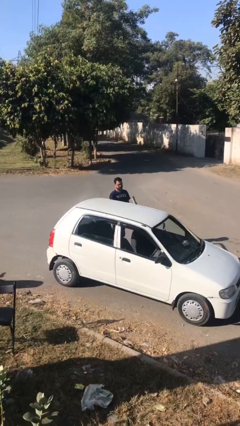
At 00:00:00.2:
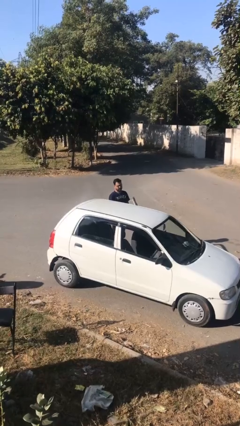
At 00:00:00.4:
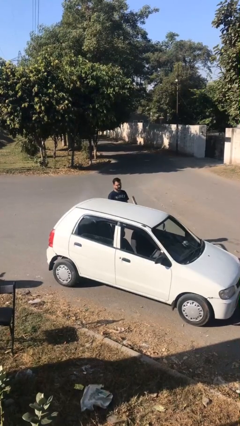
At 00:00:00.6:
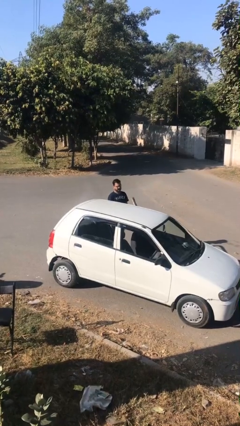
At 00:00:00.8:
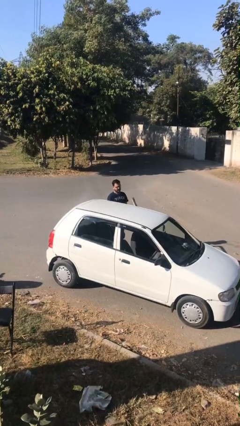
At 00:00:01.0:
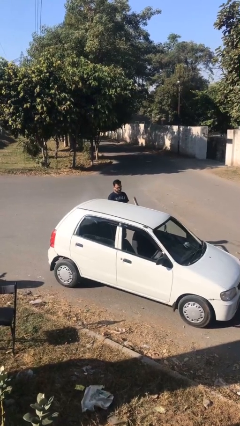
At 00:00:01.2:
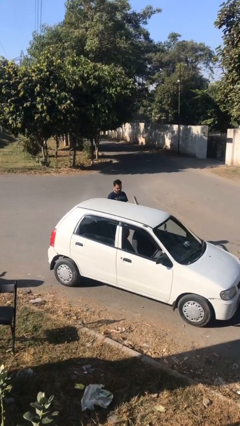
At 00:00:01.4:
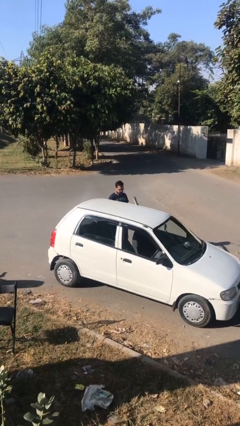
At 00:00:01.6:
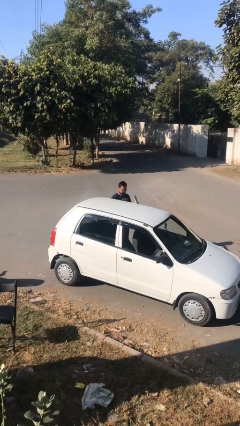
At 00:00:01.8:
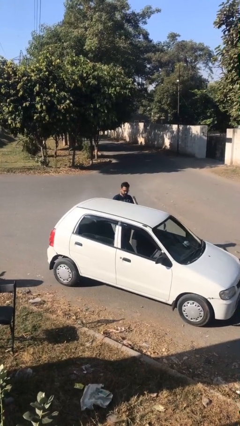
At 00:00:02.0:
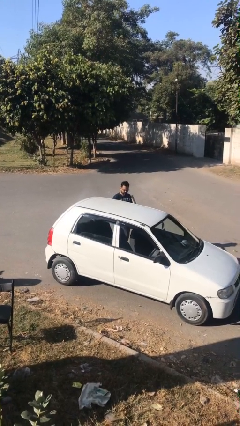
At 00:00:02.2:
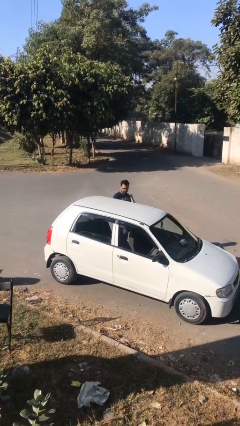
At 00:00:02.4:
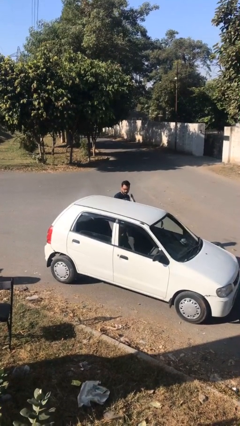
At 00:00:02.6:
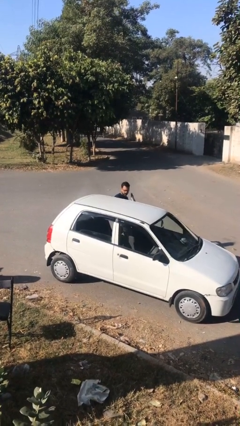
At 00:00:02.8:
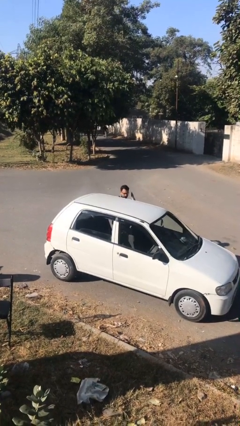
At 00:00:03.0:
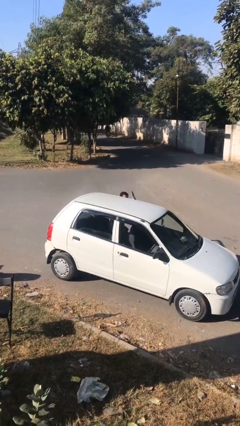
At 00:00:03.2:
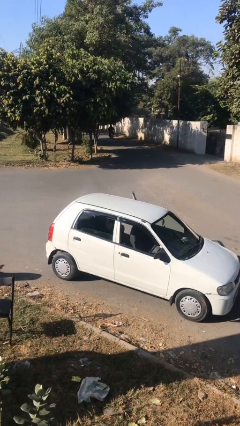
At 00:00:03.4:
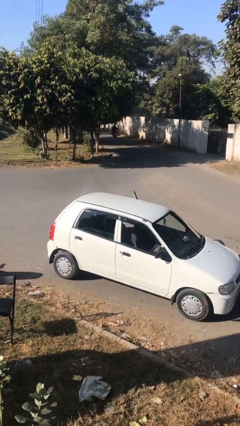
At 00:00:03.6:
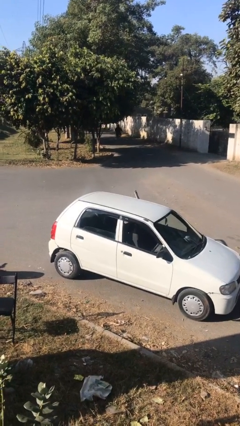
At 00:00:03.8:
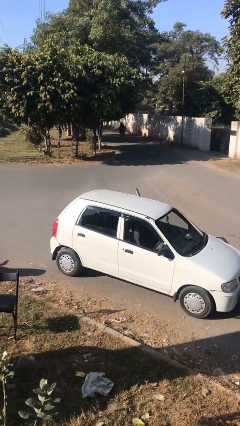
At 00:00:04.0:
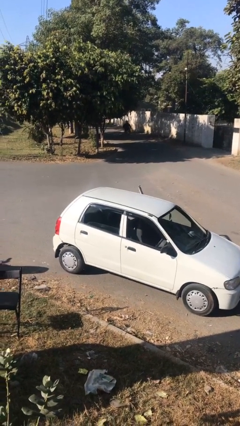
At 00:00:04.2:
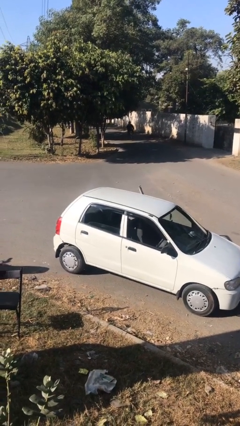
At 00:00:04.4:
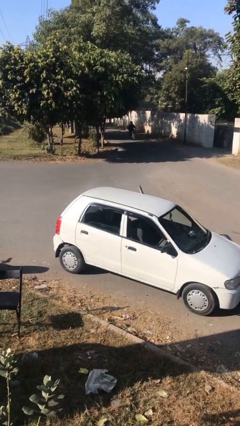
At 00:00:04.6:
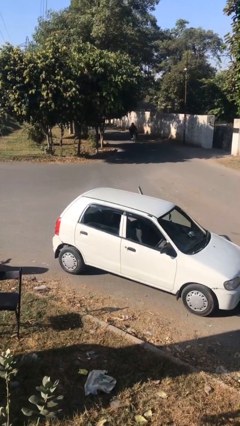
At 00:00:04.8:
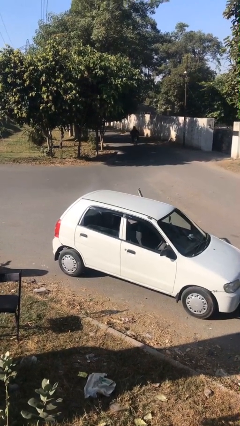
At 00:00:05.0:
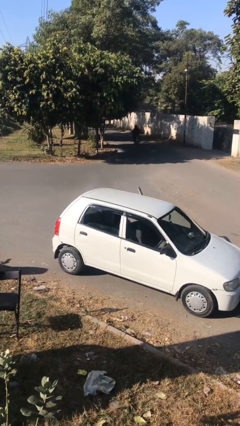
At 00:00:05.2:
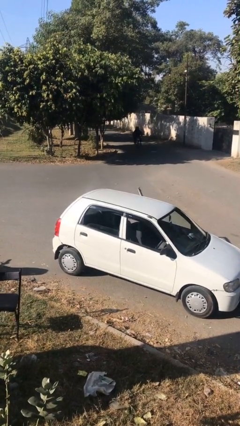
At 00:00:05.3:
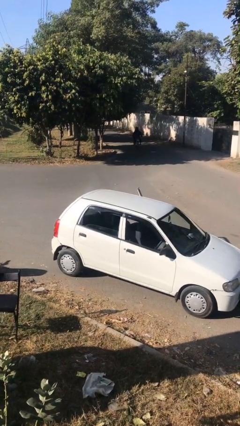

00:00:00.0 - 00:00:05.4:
person enters car

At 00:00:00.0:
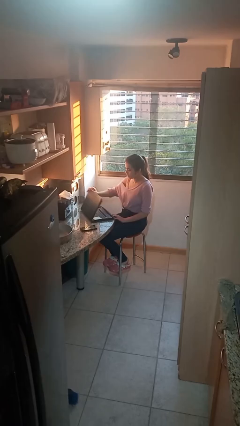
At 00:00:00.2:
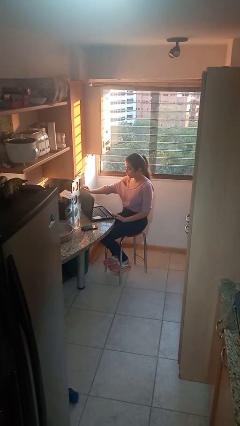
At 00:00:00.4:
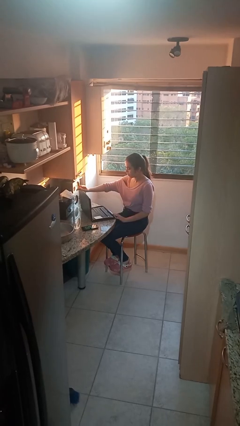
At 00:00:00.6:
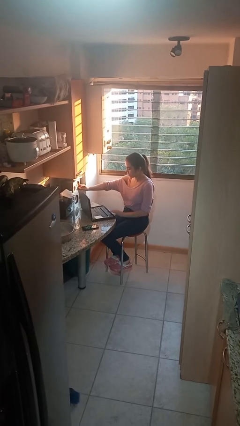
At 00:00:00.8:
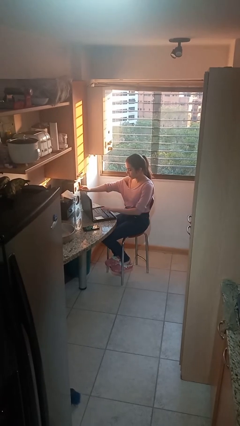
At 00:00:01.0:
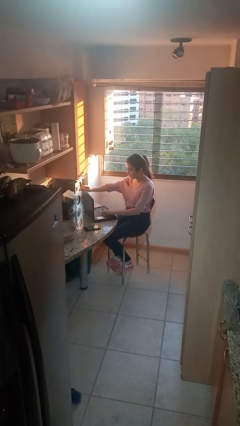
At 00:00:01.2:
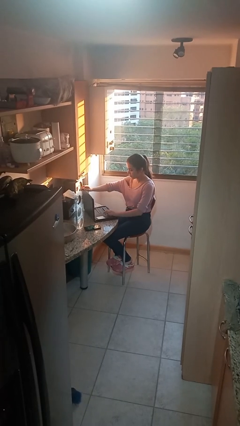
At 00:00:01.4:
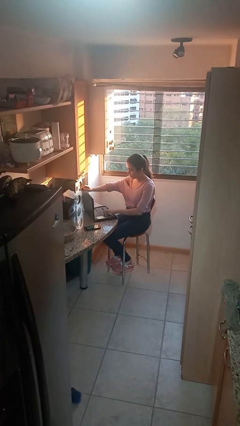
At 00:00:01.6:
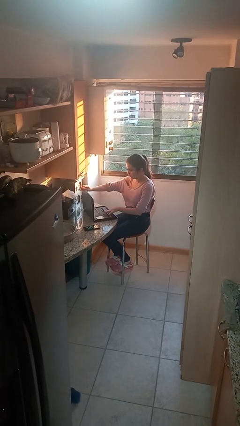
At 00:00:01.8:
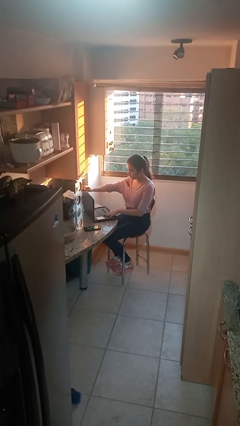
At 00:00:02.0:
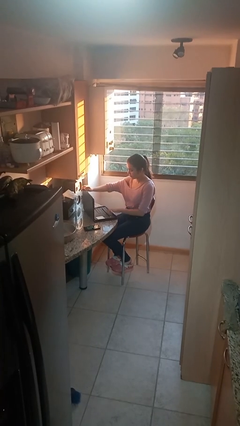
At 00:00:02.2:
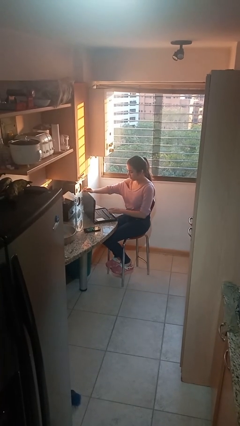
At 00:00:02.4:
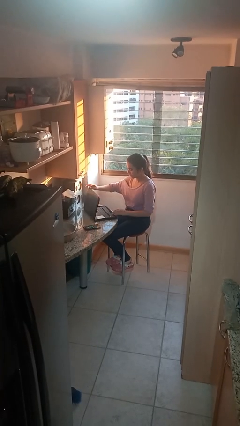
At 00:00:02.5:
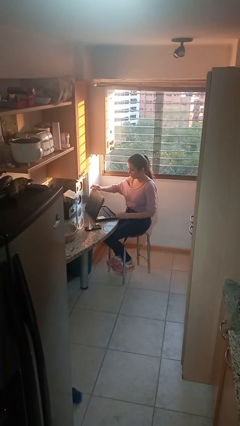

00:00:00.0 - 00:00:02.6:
person interacts with laptop

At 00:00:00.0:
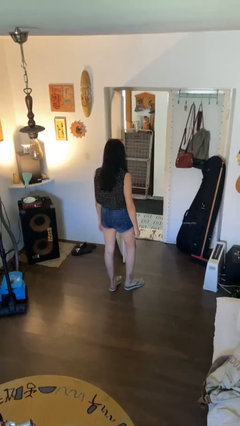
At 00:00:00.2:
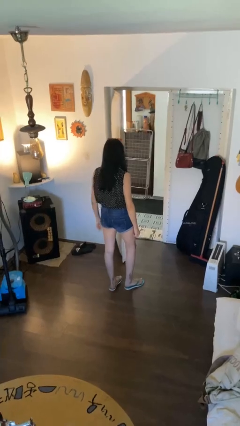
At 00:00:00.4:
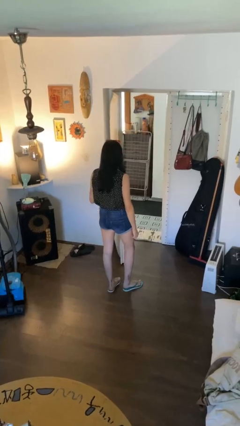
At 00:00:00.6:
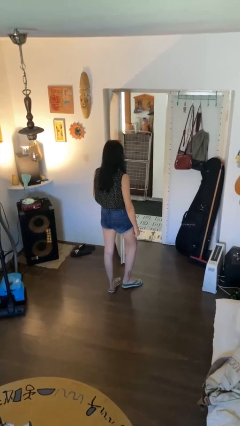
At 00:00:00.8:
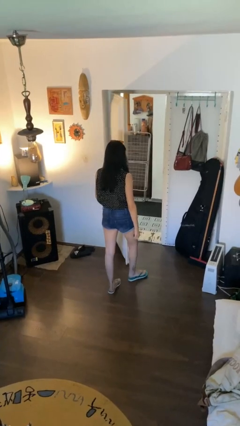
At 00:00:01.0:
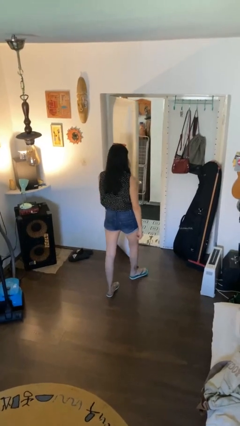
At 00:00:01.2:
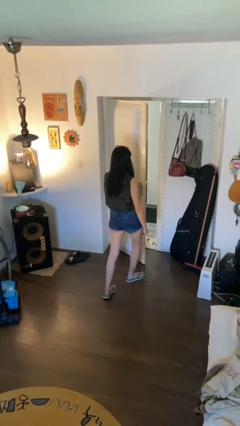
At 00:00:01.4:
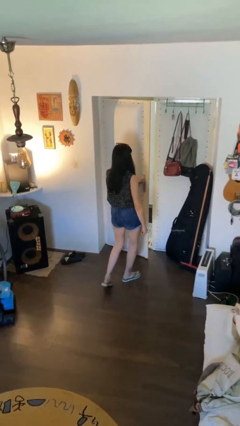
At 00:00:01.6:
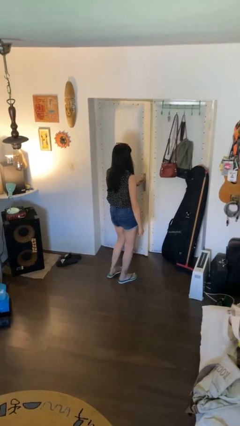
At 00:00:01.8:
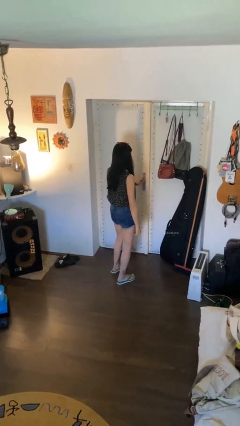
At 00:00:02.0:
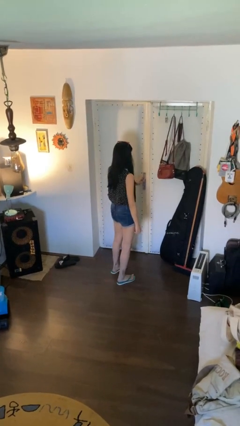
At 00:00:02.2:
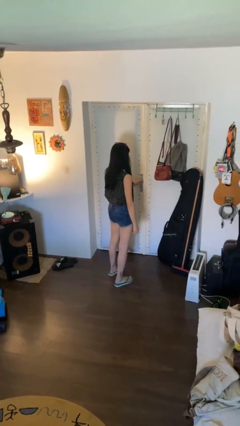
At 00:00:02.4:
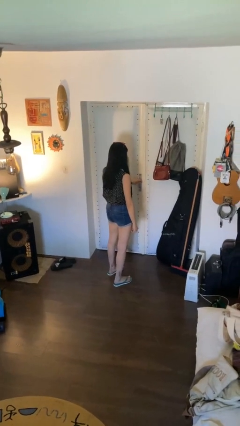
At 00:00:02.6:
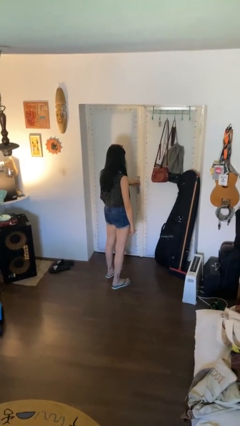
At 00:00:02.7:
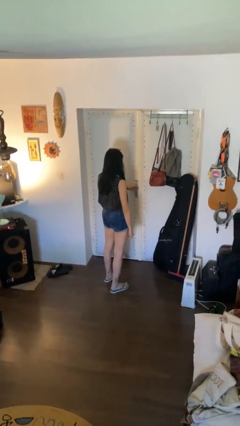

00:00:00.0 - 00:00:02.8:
person closes facility door

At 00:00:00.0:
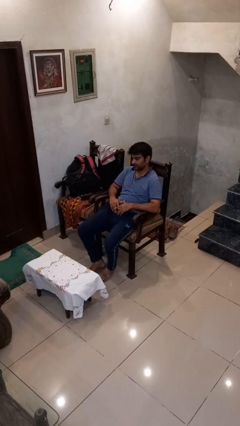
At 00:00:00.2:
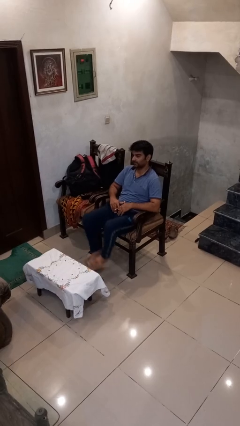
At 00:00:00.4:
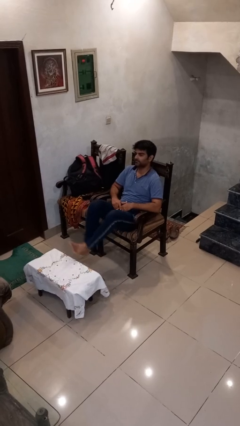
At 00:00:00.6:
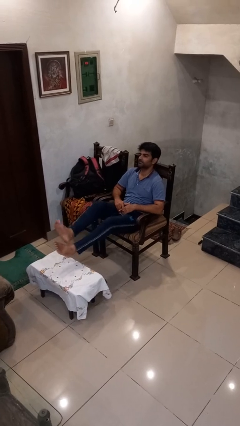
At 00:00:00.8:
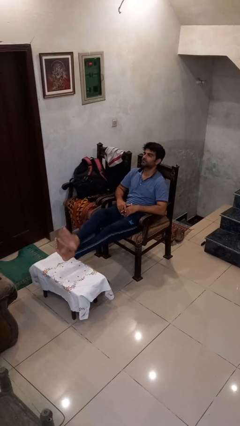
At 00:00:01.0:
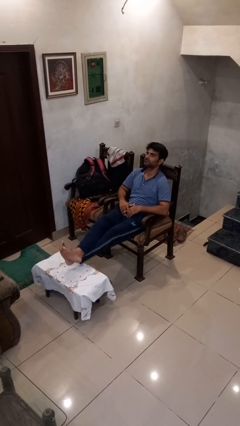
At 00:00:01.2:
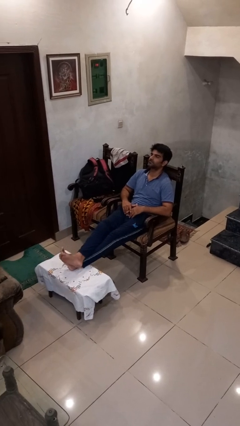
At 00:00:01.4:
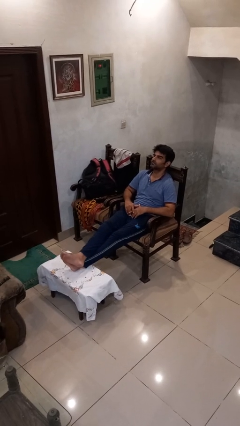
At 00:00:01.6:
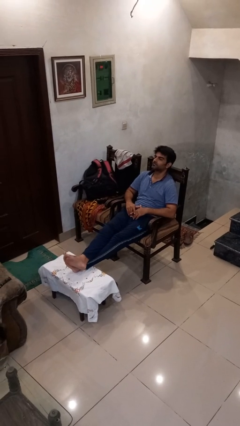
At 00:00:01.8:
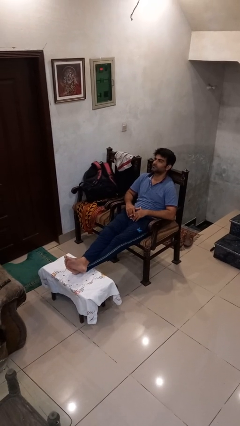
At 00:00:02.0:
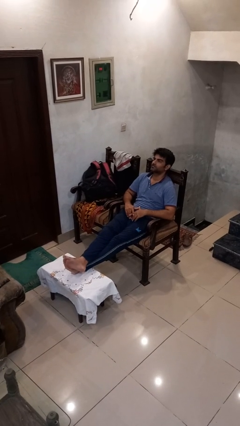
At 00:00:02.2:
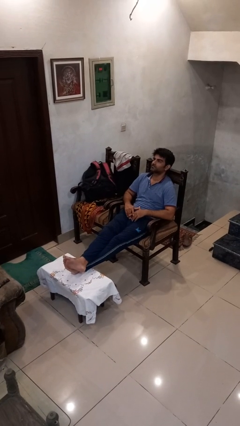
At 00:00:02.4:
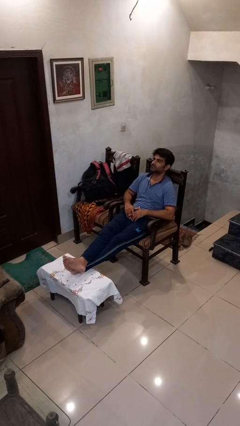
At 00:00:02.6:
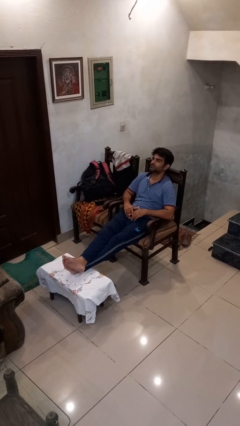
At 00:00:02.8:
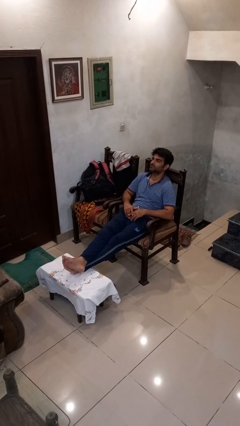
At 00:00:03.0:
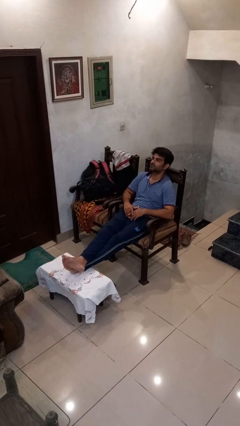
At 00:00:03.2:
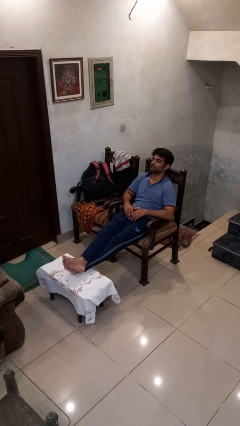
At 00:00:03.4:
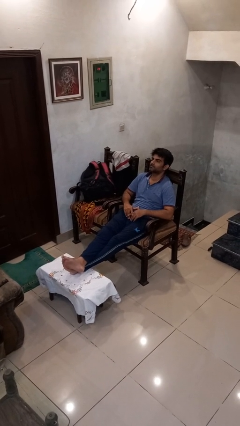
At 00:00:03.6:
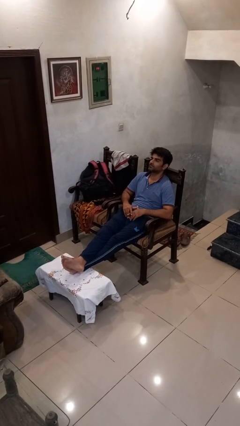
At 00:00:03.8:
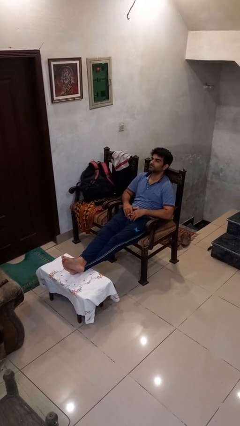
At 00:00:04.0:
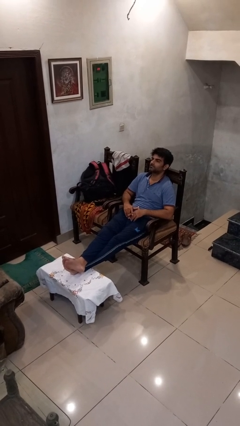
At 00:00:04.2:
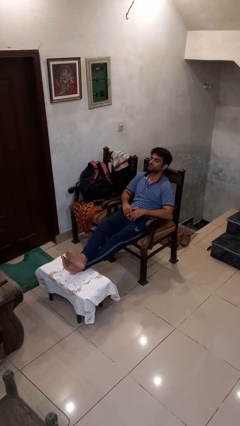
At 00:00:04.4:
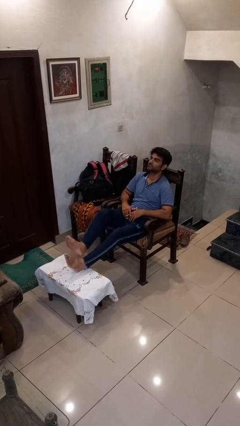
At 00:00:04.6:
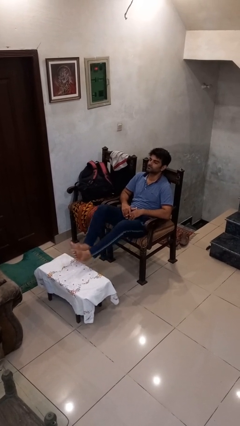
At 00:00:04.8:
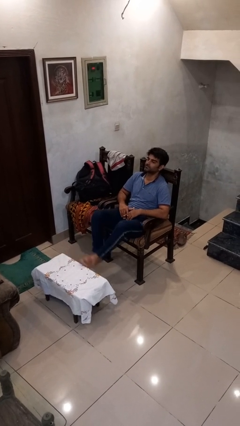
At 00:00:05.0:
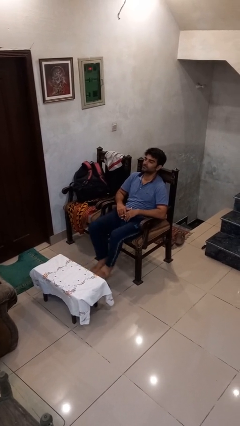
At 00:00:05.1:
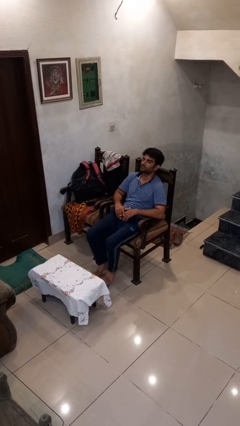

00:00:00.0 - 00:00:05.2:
person puts feet up

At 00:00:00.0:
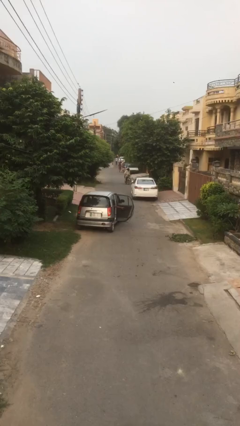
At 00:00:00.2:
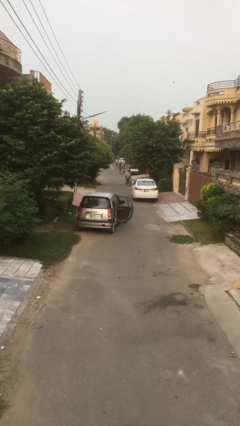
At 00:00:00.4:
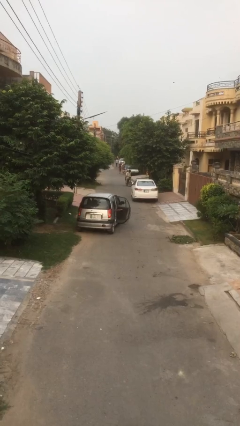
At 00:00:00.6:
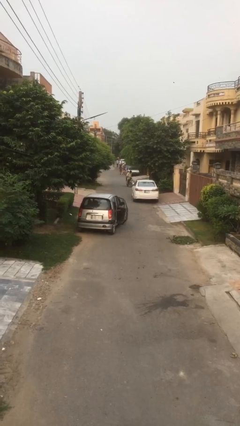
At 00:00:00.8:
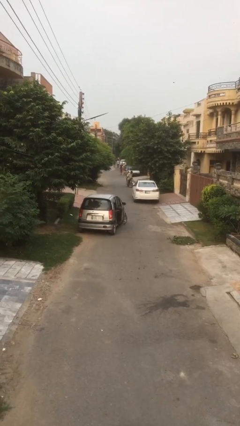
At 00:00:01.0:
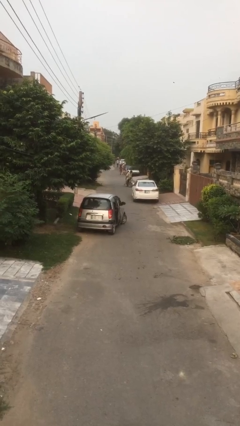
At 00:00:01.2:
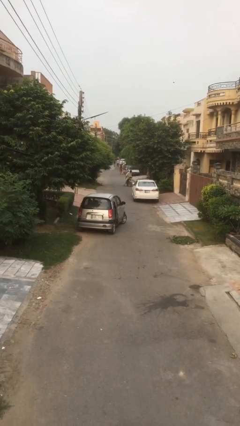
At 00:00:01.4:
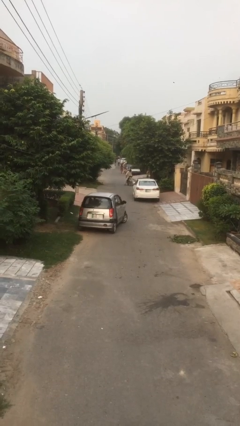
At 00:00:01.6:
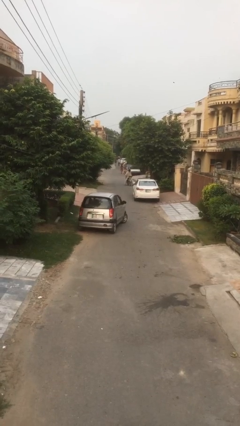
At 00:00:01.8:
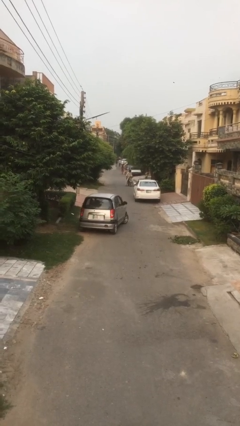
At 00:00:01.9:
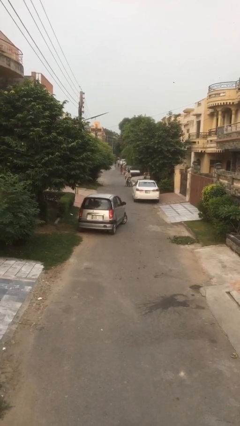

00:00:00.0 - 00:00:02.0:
person closes car door
